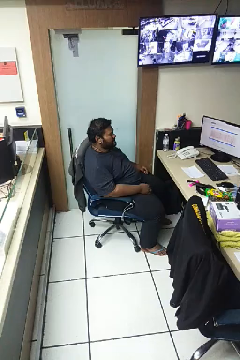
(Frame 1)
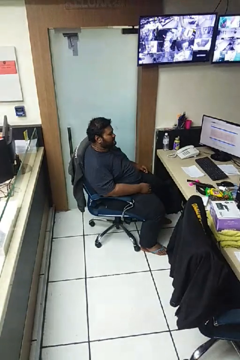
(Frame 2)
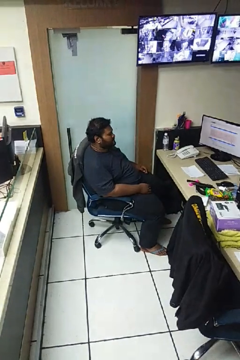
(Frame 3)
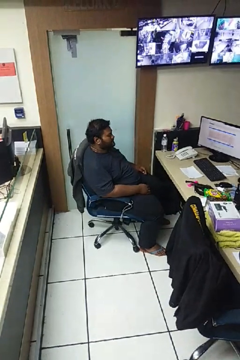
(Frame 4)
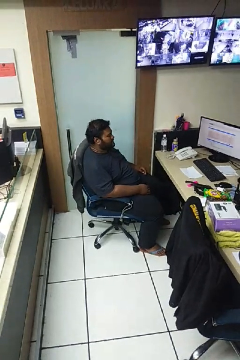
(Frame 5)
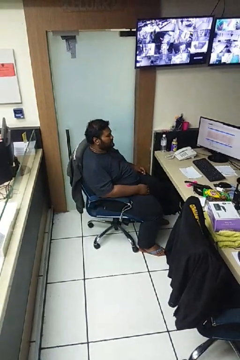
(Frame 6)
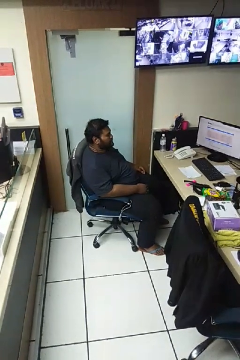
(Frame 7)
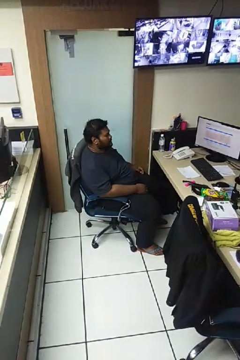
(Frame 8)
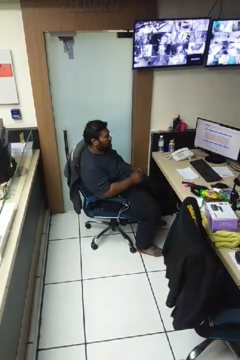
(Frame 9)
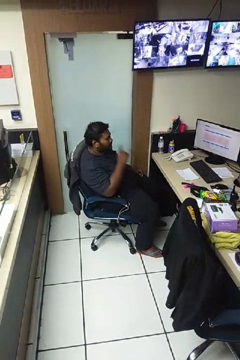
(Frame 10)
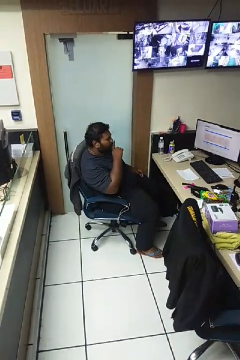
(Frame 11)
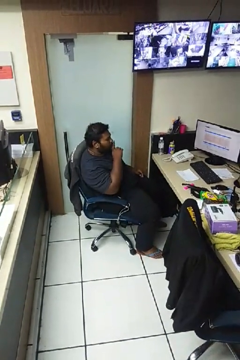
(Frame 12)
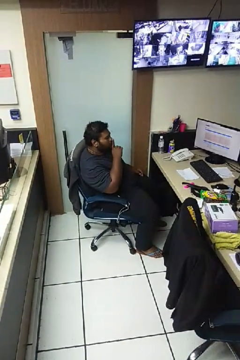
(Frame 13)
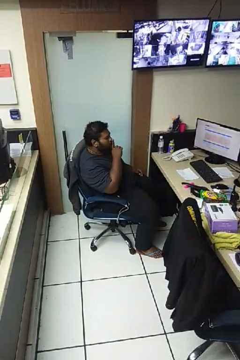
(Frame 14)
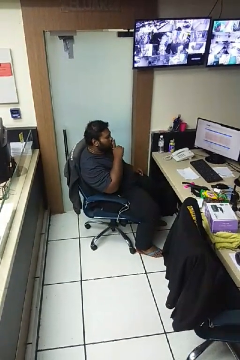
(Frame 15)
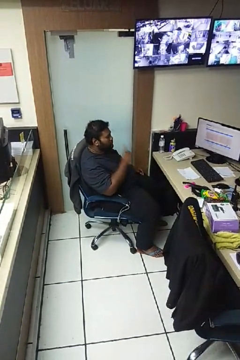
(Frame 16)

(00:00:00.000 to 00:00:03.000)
person gestures be quiet

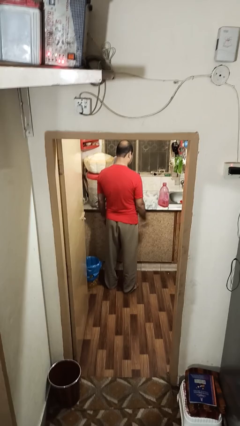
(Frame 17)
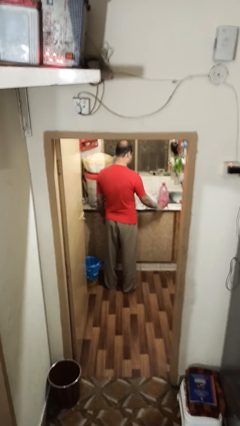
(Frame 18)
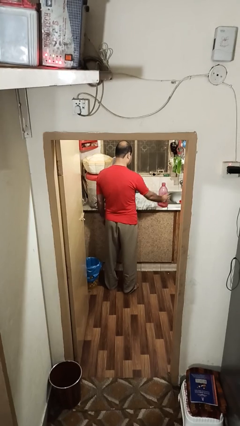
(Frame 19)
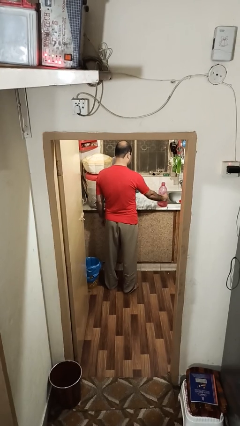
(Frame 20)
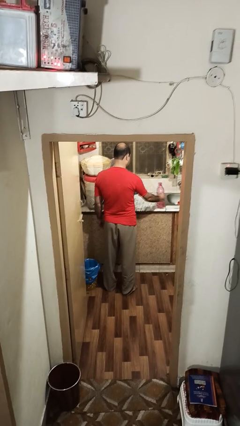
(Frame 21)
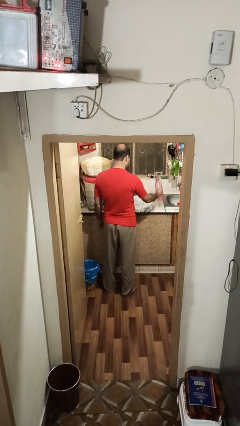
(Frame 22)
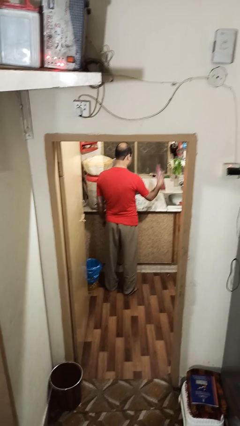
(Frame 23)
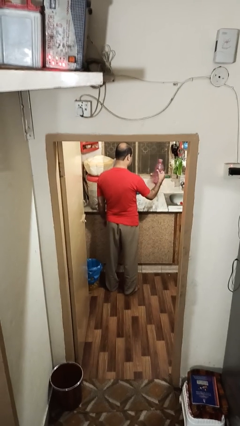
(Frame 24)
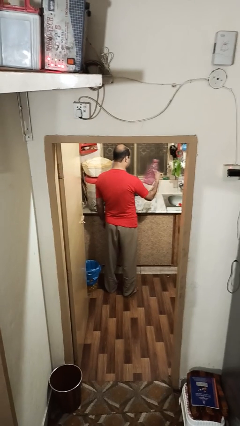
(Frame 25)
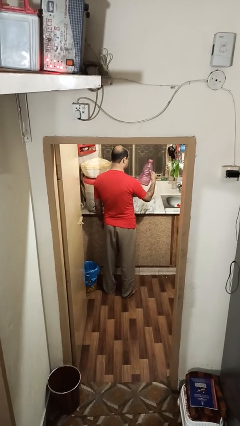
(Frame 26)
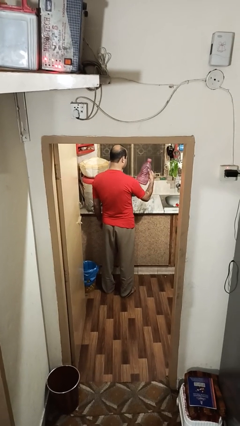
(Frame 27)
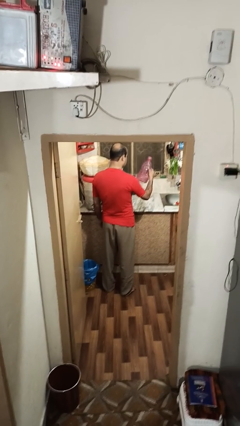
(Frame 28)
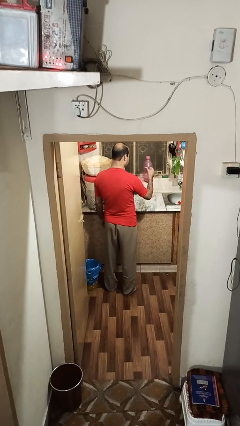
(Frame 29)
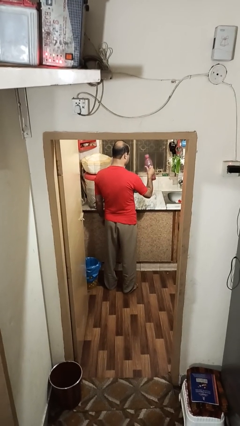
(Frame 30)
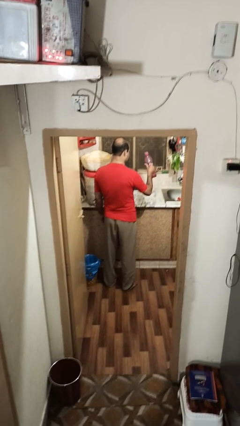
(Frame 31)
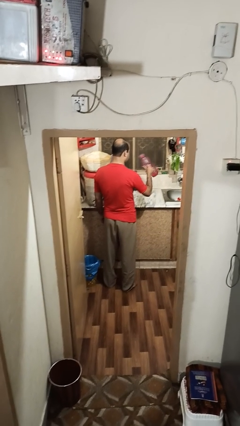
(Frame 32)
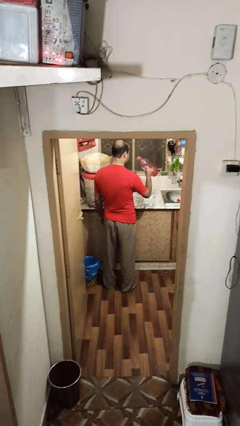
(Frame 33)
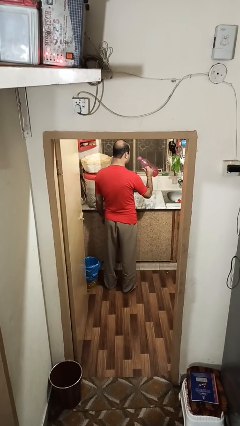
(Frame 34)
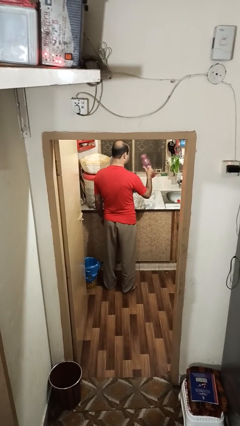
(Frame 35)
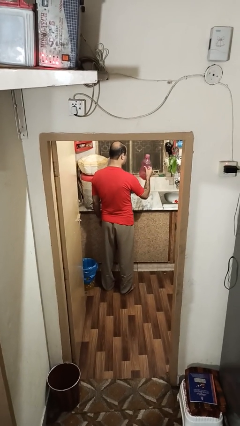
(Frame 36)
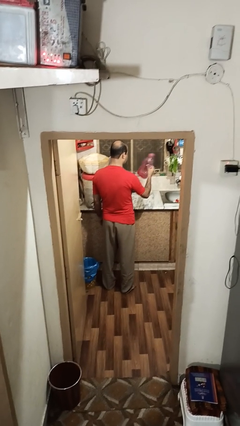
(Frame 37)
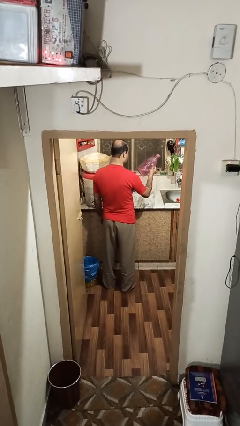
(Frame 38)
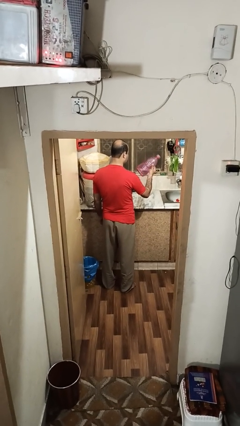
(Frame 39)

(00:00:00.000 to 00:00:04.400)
person picks up object from countertop

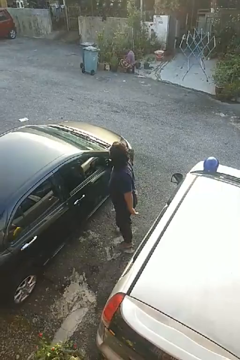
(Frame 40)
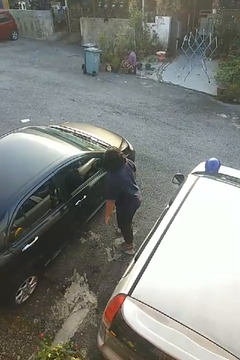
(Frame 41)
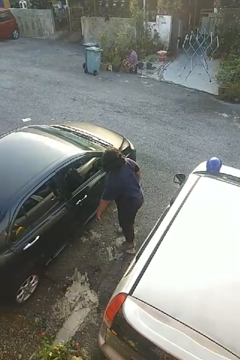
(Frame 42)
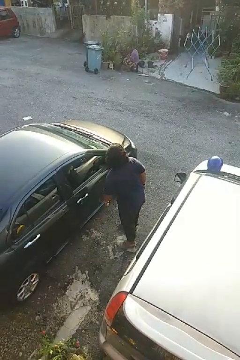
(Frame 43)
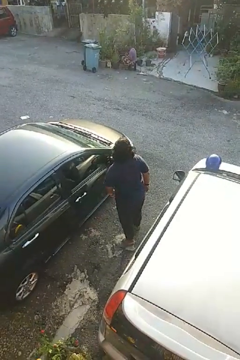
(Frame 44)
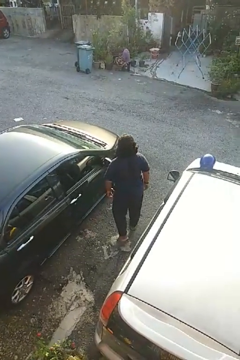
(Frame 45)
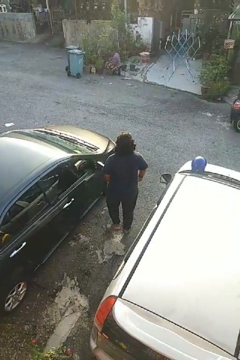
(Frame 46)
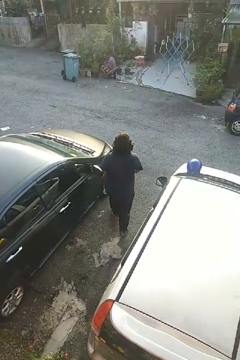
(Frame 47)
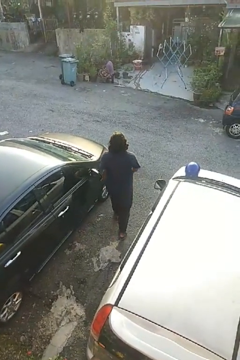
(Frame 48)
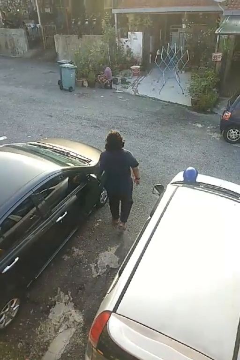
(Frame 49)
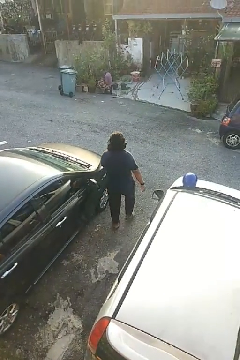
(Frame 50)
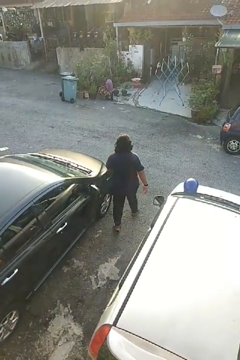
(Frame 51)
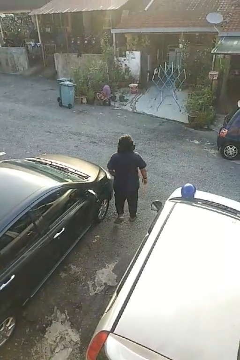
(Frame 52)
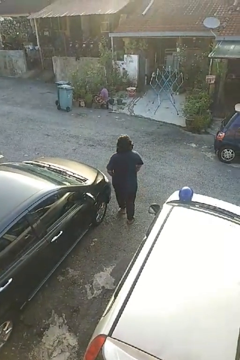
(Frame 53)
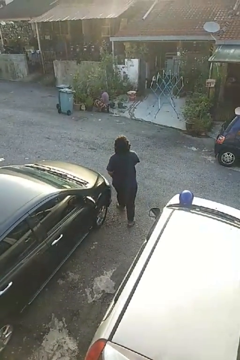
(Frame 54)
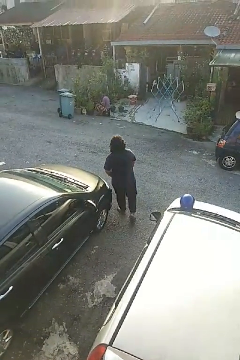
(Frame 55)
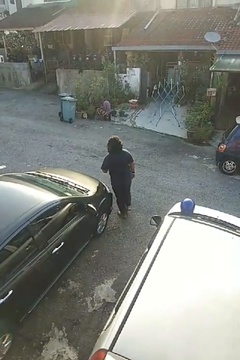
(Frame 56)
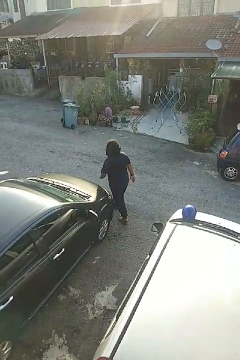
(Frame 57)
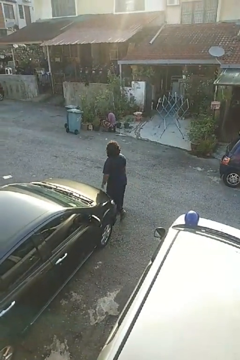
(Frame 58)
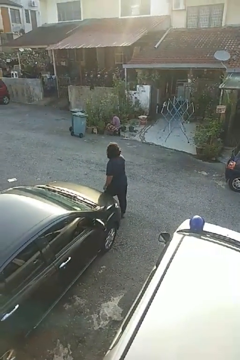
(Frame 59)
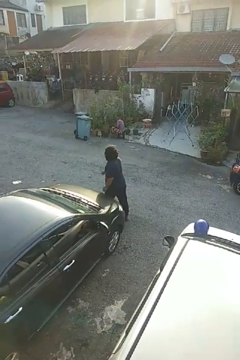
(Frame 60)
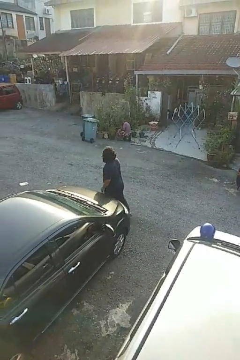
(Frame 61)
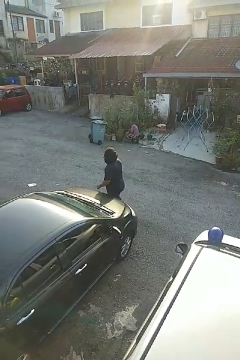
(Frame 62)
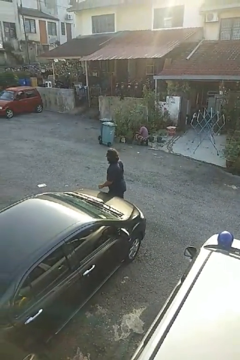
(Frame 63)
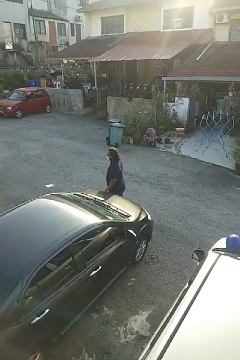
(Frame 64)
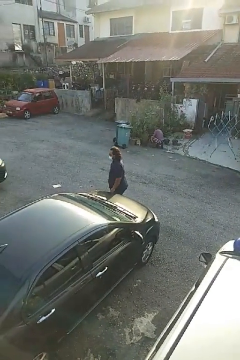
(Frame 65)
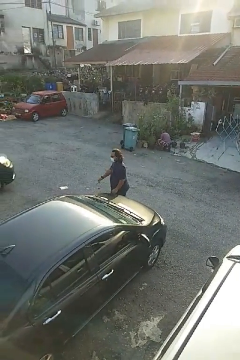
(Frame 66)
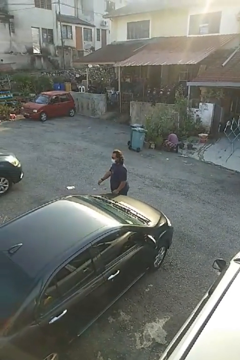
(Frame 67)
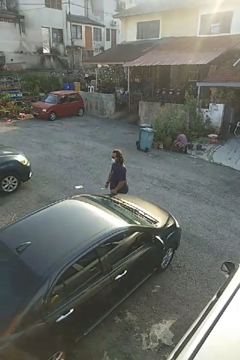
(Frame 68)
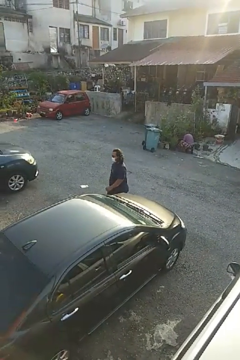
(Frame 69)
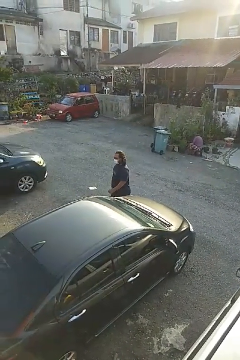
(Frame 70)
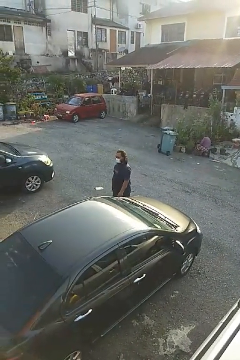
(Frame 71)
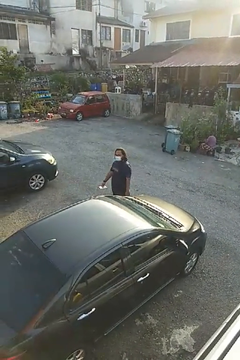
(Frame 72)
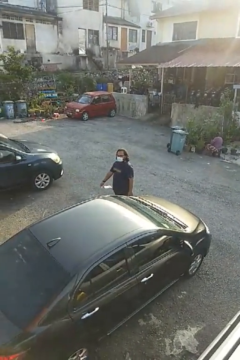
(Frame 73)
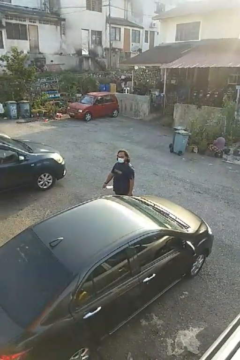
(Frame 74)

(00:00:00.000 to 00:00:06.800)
person walks around car

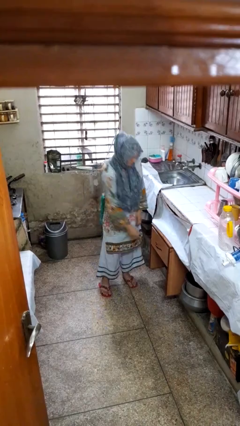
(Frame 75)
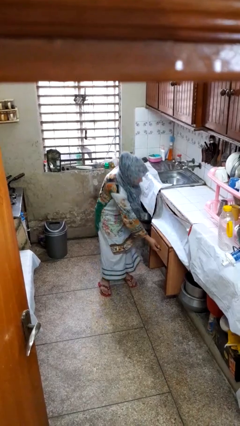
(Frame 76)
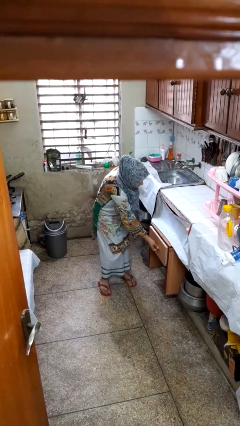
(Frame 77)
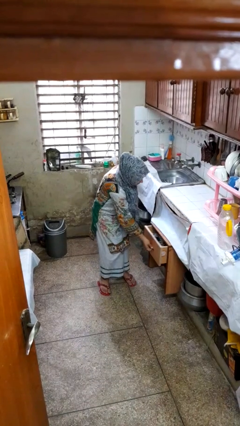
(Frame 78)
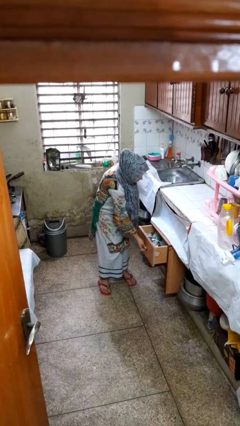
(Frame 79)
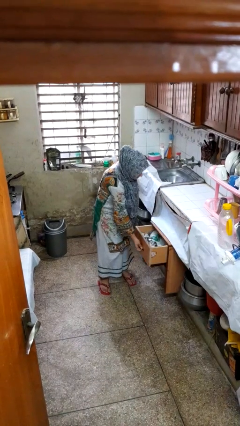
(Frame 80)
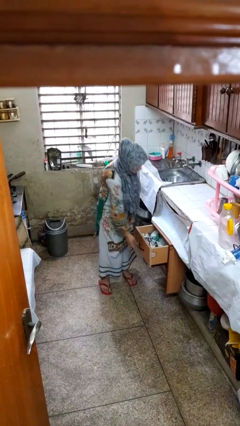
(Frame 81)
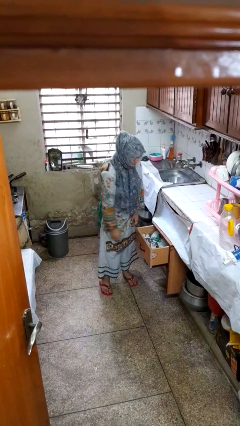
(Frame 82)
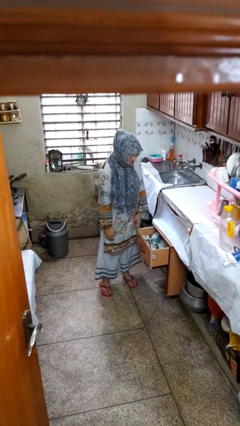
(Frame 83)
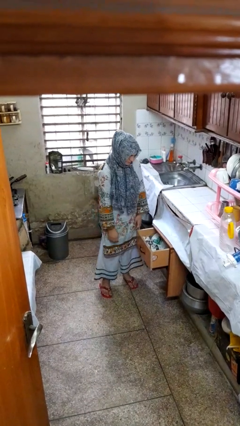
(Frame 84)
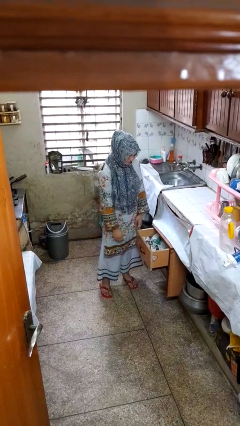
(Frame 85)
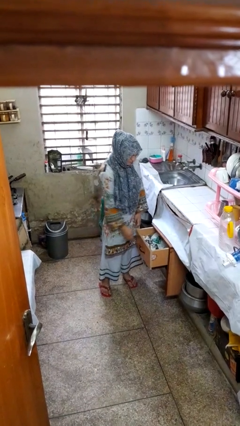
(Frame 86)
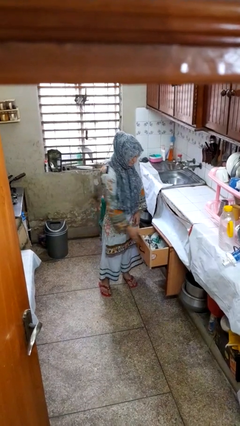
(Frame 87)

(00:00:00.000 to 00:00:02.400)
person opens kitchen drawer

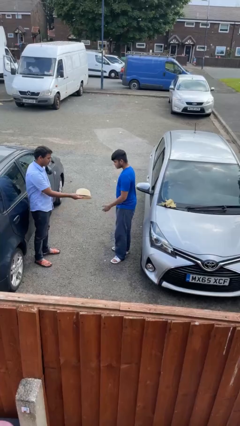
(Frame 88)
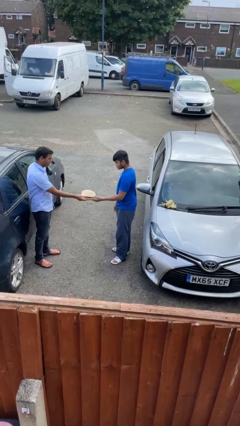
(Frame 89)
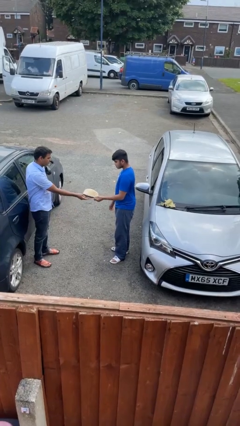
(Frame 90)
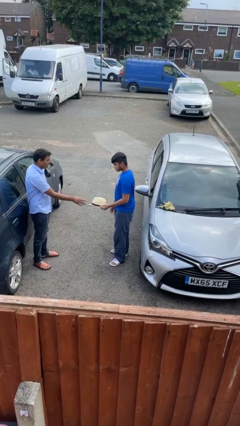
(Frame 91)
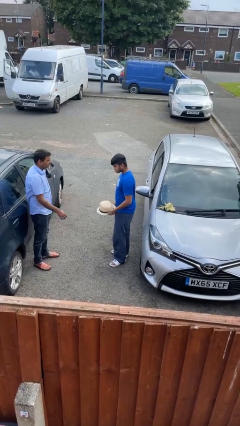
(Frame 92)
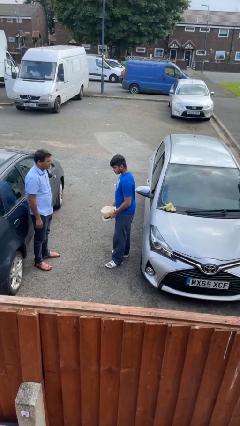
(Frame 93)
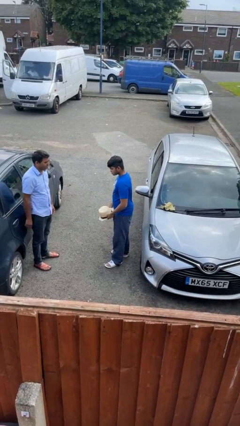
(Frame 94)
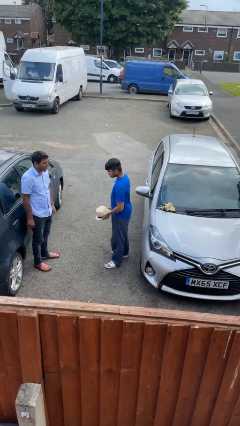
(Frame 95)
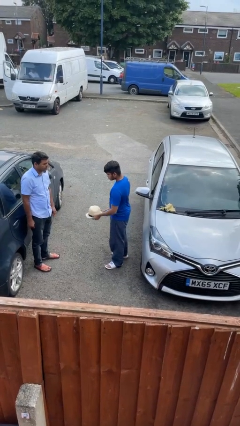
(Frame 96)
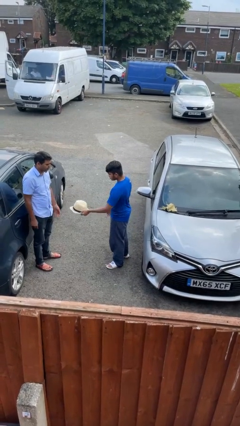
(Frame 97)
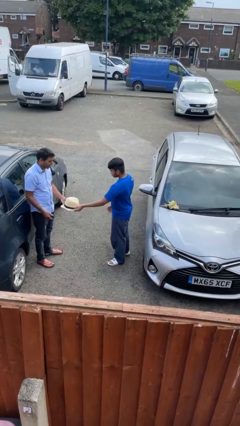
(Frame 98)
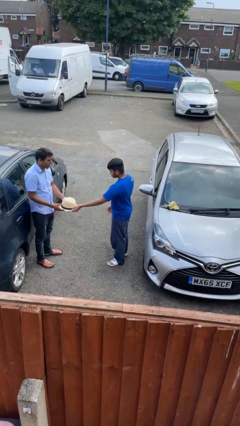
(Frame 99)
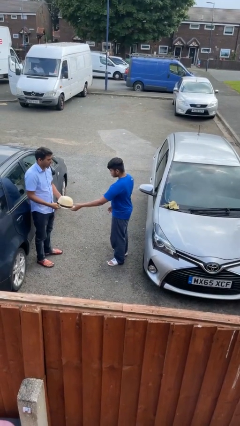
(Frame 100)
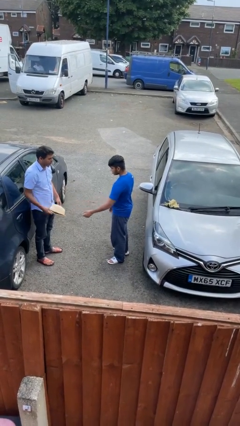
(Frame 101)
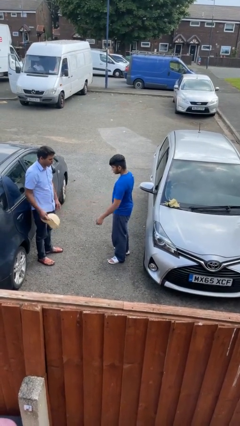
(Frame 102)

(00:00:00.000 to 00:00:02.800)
person transfers object to person
